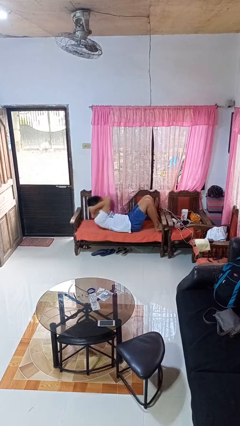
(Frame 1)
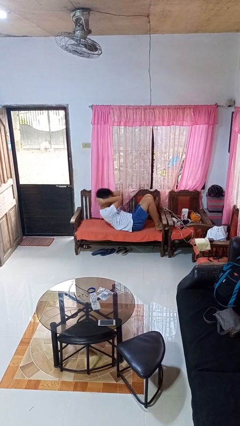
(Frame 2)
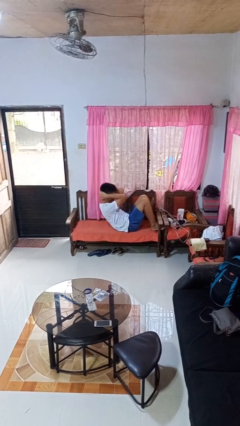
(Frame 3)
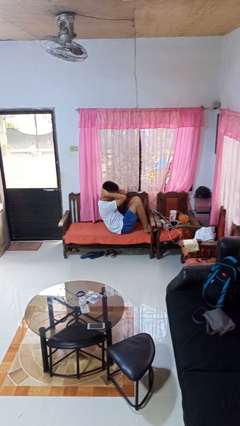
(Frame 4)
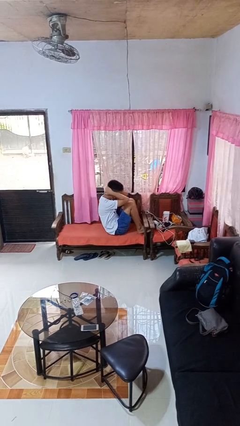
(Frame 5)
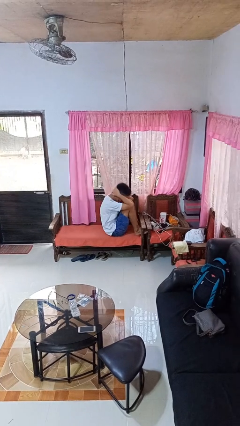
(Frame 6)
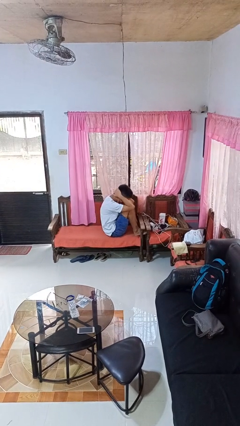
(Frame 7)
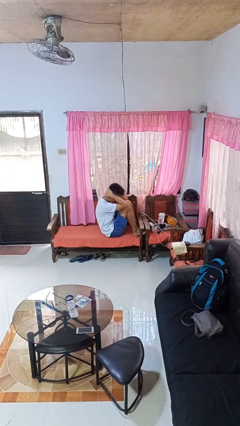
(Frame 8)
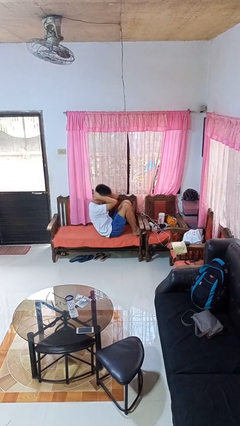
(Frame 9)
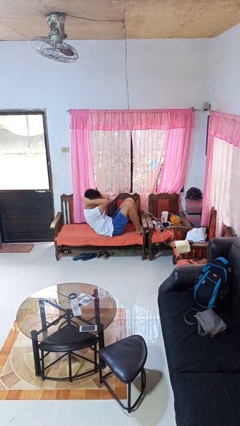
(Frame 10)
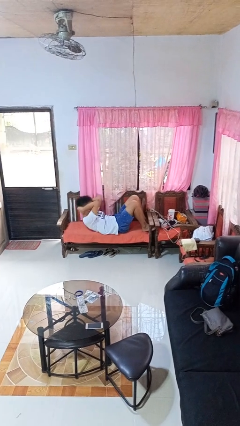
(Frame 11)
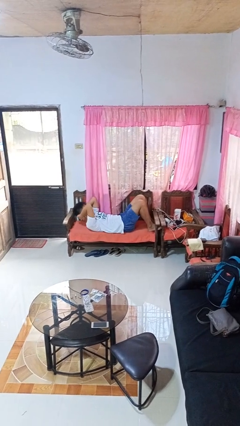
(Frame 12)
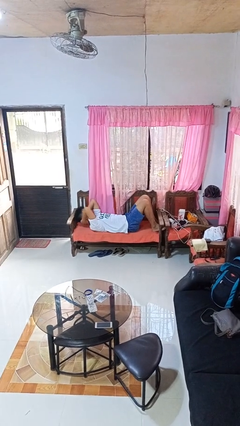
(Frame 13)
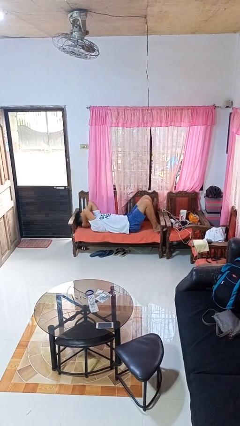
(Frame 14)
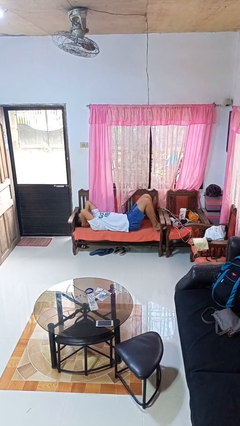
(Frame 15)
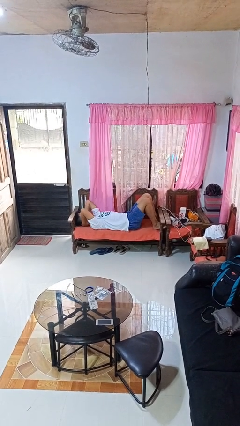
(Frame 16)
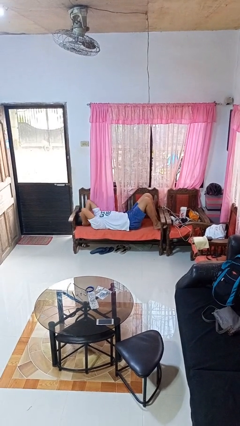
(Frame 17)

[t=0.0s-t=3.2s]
person exercises with situp

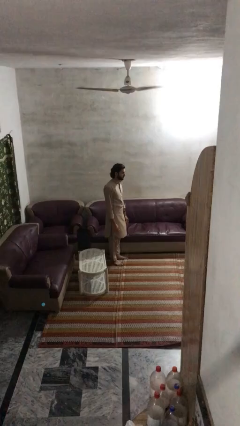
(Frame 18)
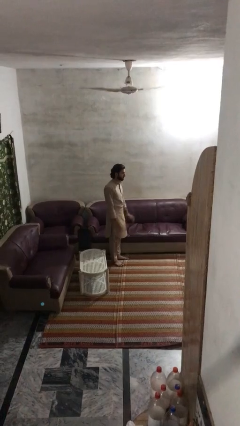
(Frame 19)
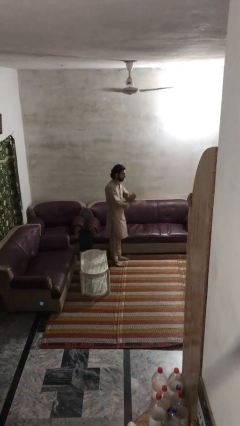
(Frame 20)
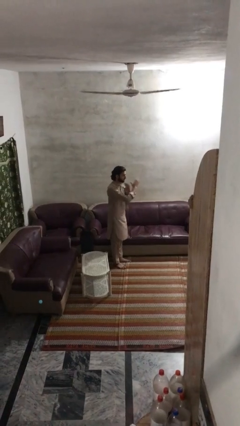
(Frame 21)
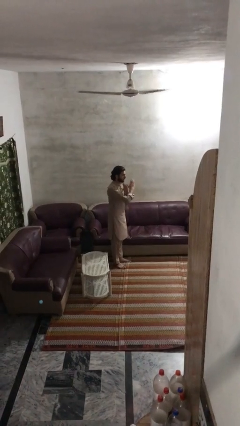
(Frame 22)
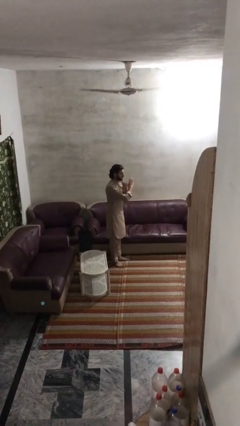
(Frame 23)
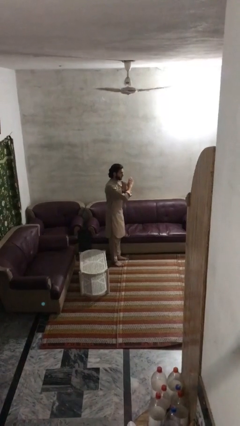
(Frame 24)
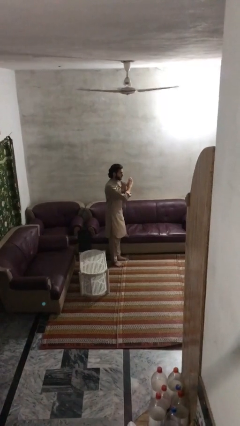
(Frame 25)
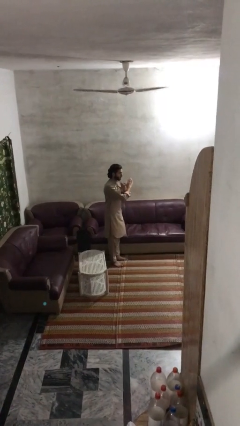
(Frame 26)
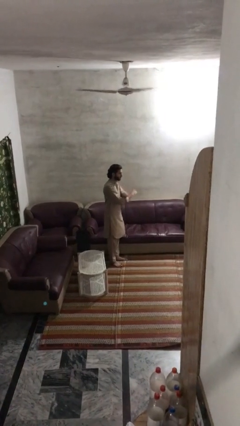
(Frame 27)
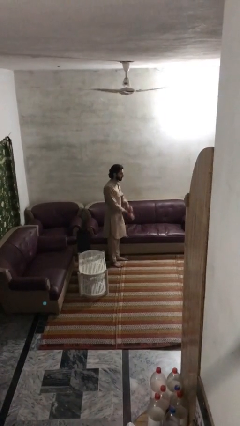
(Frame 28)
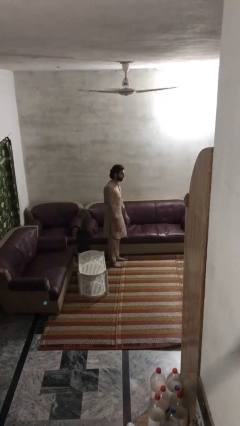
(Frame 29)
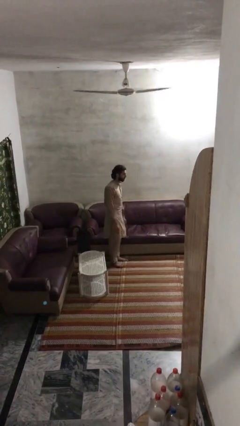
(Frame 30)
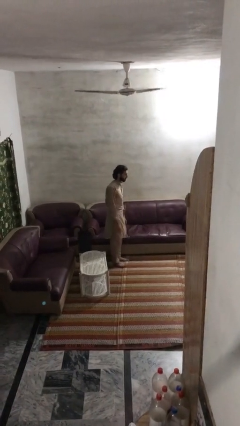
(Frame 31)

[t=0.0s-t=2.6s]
person gestures arms x

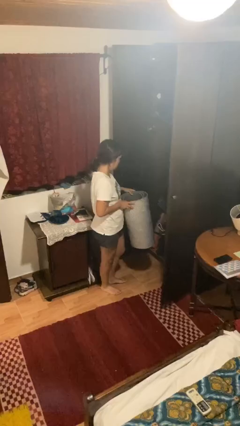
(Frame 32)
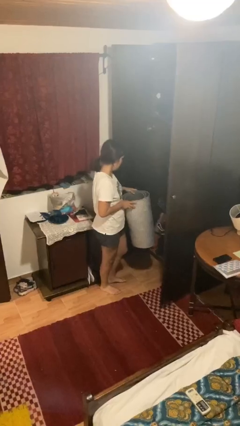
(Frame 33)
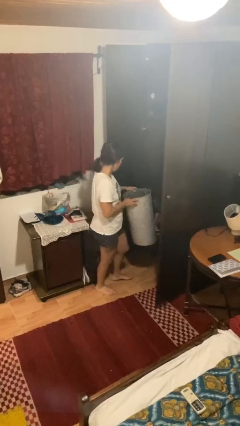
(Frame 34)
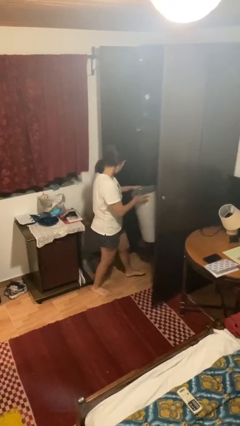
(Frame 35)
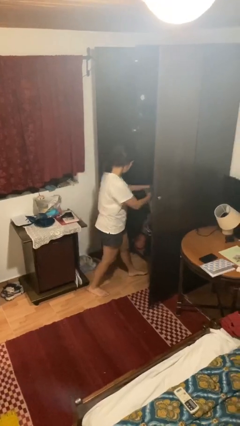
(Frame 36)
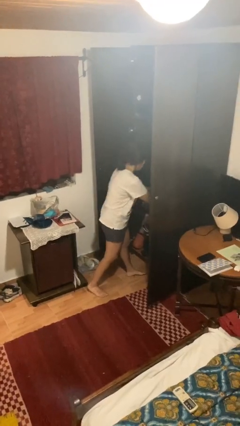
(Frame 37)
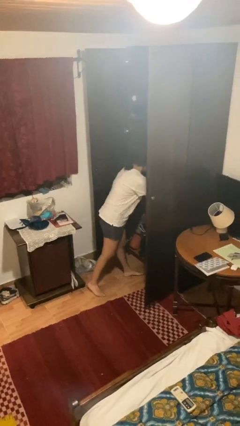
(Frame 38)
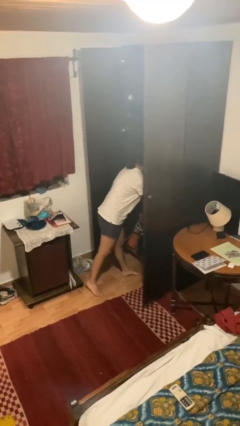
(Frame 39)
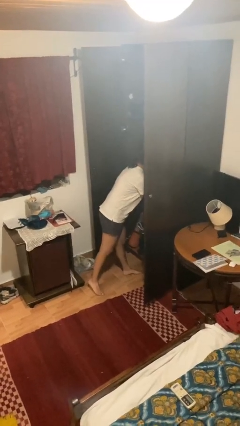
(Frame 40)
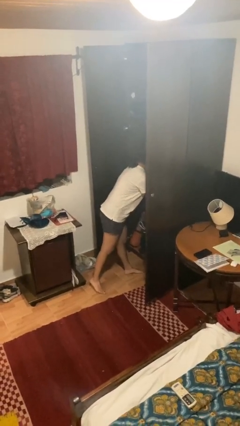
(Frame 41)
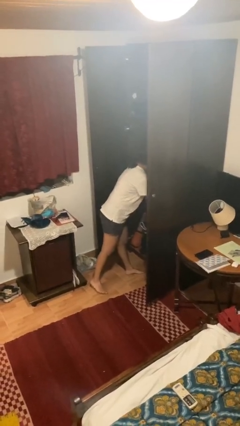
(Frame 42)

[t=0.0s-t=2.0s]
person puts down object into cabinet

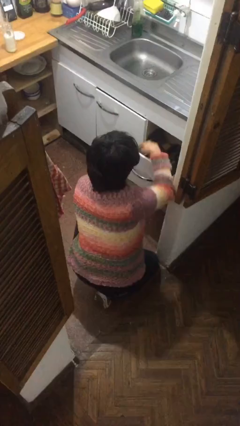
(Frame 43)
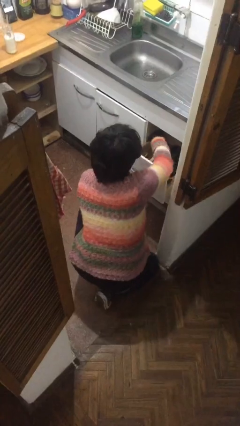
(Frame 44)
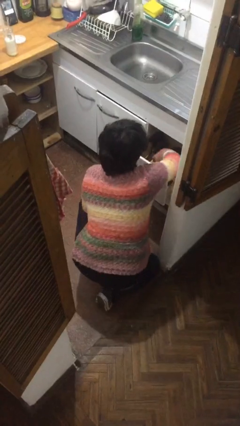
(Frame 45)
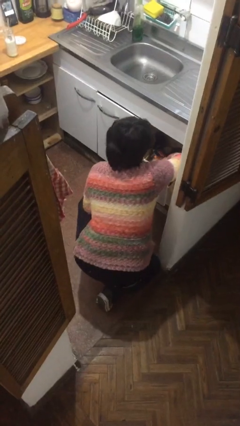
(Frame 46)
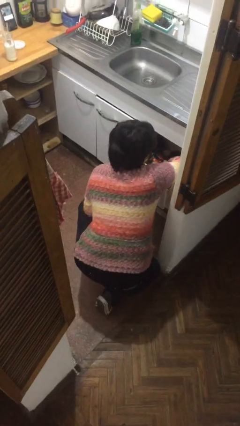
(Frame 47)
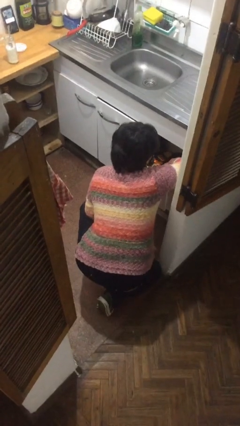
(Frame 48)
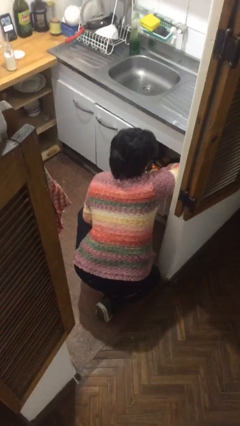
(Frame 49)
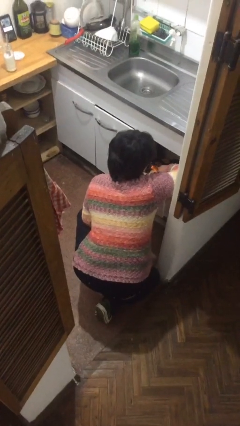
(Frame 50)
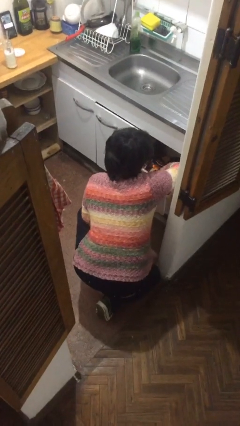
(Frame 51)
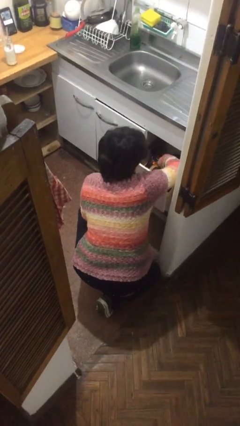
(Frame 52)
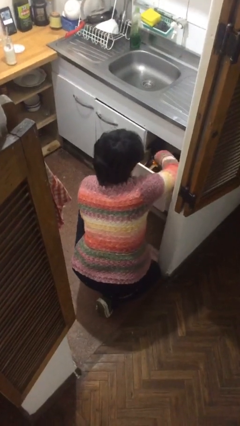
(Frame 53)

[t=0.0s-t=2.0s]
person searches in kitchen drawer

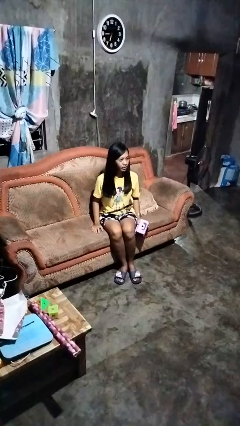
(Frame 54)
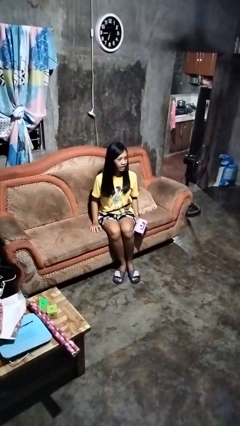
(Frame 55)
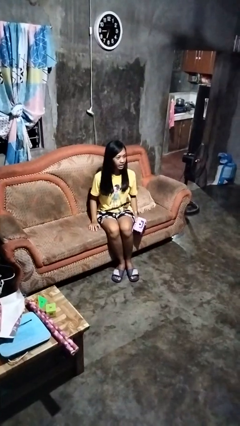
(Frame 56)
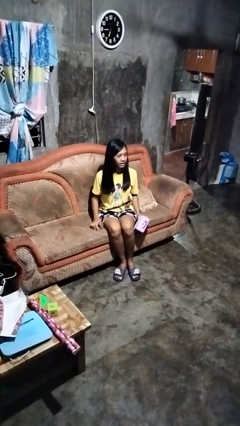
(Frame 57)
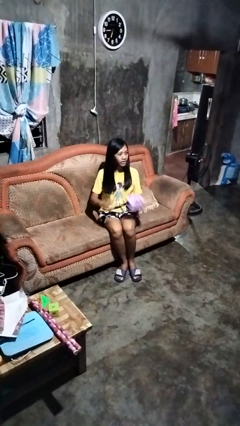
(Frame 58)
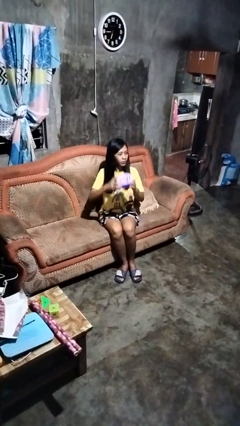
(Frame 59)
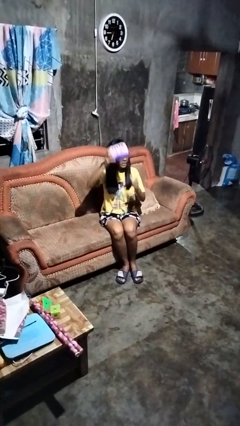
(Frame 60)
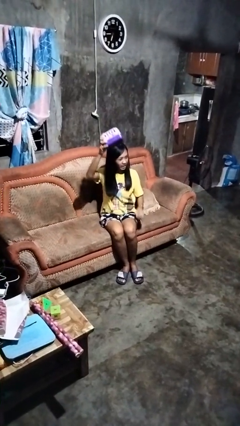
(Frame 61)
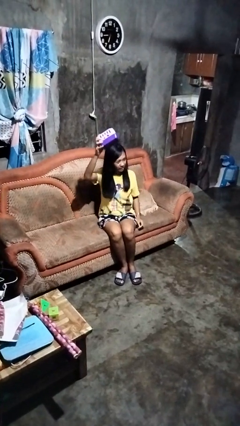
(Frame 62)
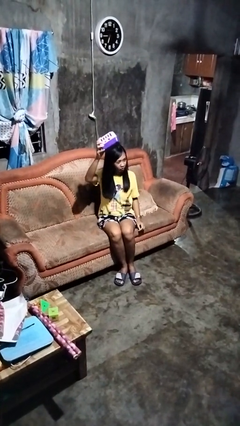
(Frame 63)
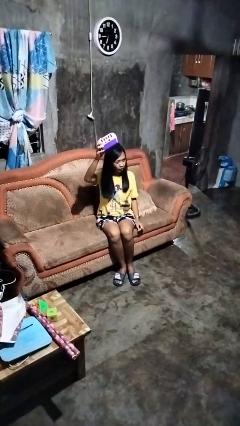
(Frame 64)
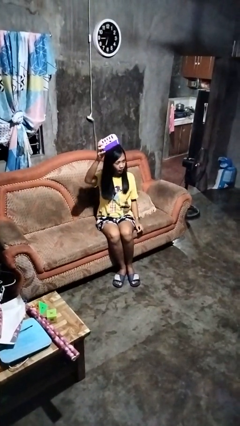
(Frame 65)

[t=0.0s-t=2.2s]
person holds object above head

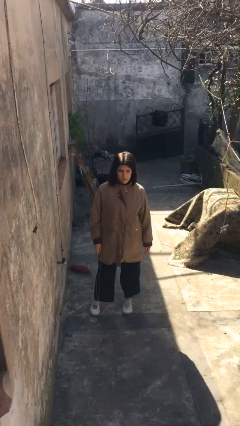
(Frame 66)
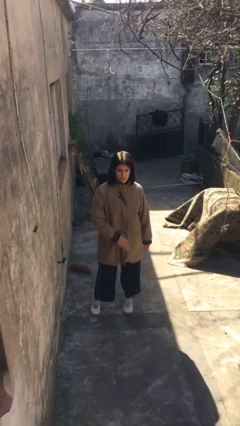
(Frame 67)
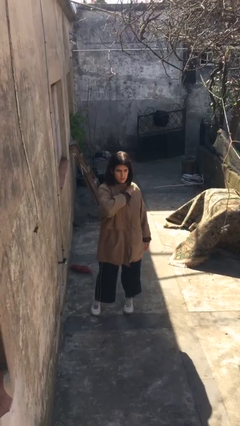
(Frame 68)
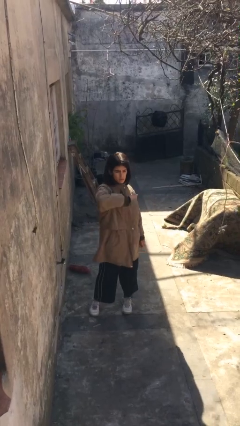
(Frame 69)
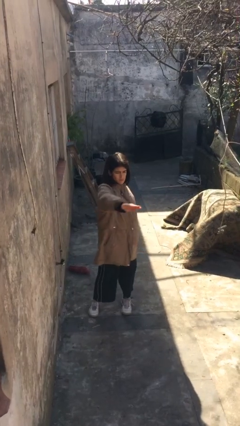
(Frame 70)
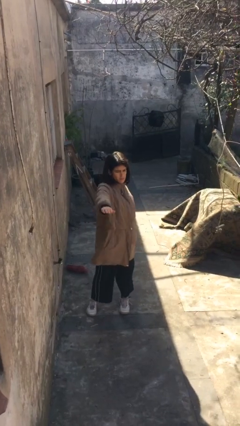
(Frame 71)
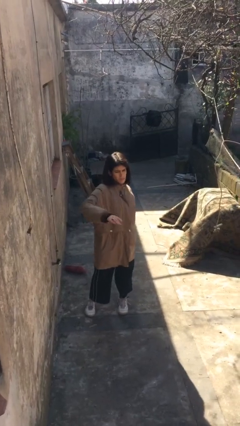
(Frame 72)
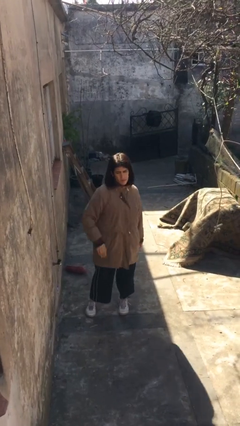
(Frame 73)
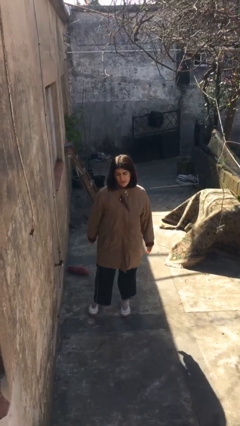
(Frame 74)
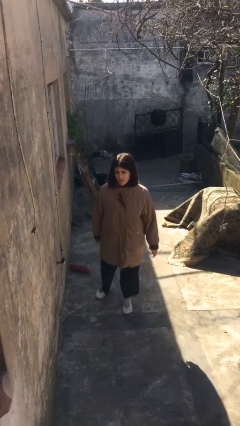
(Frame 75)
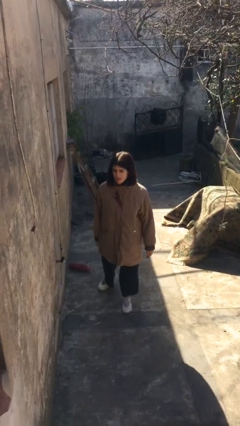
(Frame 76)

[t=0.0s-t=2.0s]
person karate chop

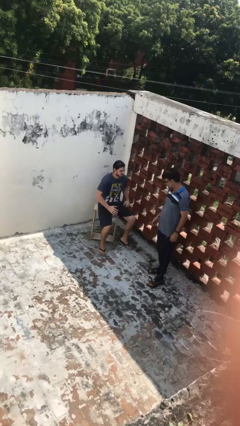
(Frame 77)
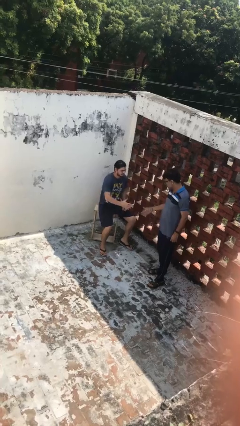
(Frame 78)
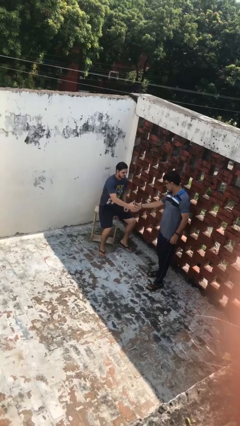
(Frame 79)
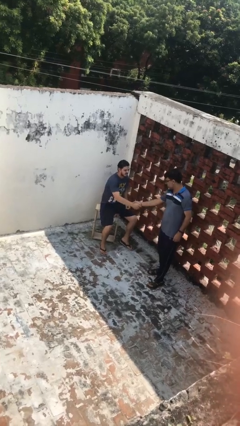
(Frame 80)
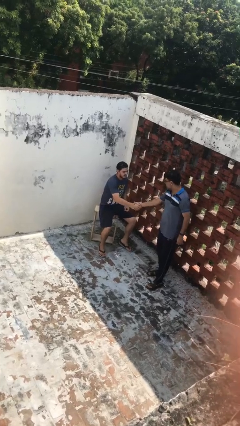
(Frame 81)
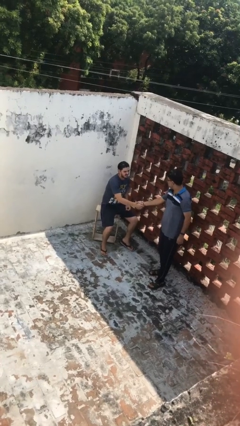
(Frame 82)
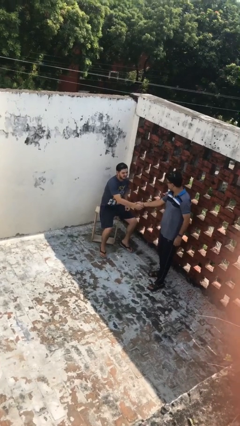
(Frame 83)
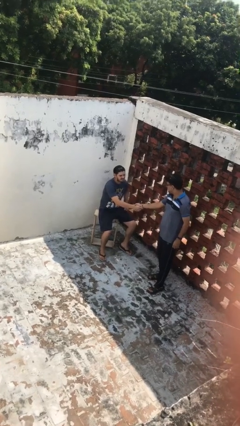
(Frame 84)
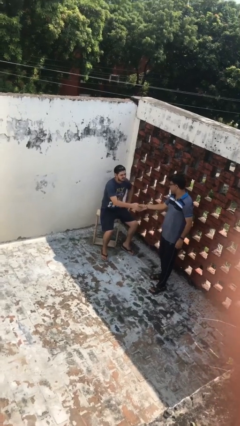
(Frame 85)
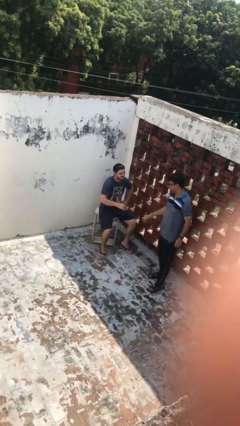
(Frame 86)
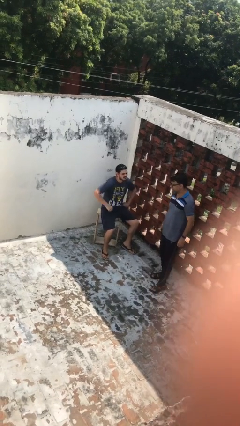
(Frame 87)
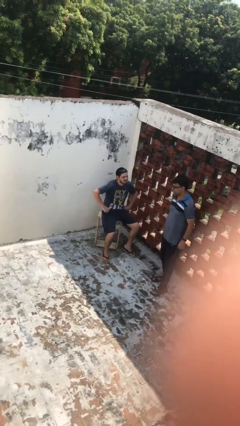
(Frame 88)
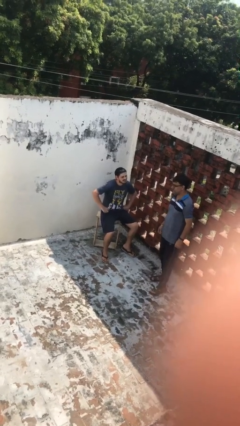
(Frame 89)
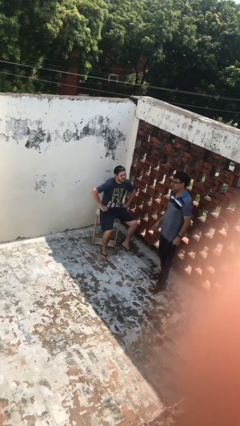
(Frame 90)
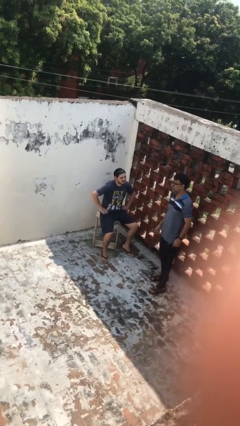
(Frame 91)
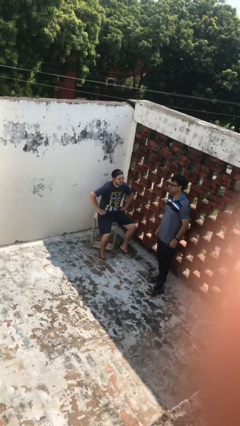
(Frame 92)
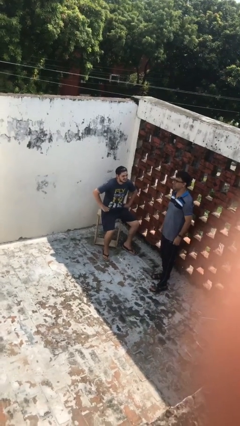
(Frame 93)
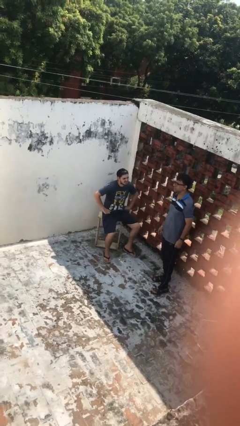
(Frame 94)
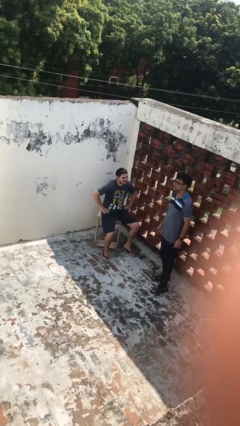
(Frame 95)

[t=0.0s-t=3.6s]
person shakes hand
